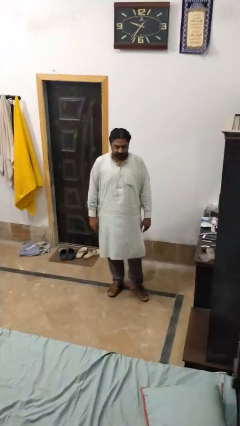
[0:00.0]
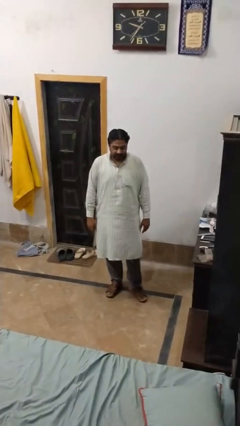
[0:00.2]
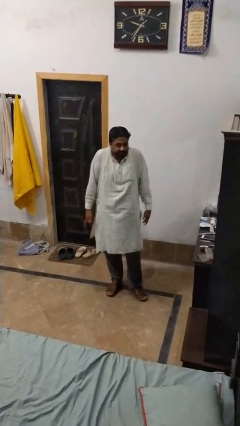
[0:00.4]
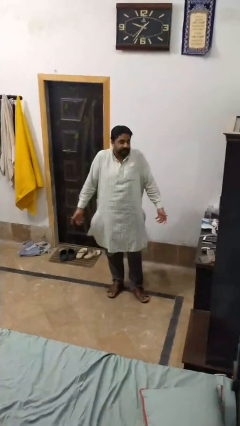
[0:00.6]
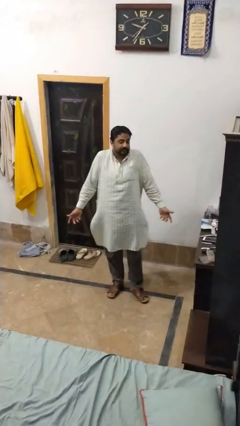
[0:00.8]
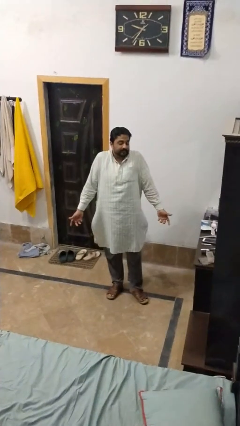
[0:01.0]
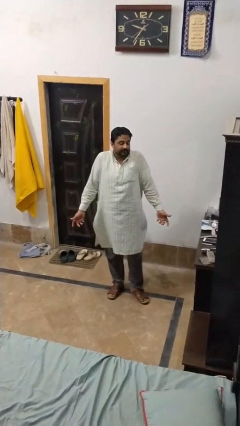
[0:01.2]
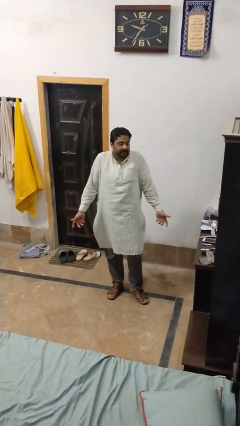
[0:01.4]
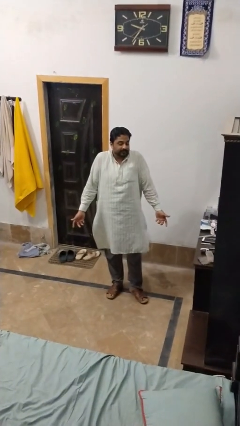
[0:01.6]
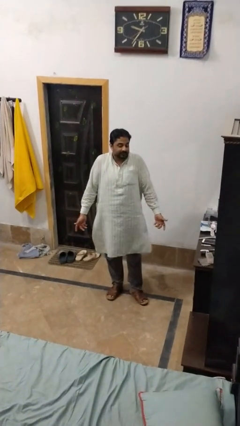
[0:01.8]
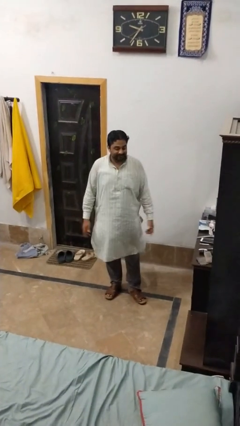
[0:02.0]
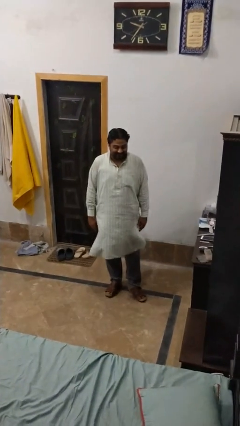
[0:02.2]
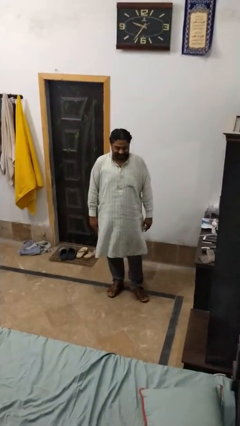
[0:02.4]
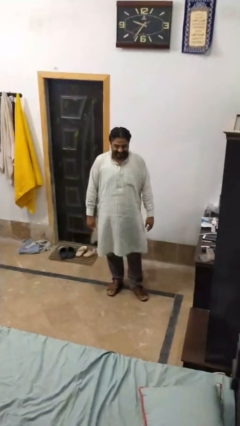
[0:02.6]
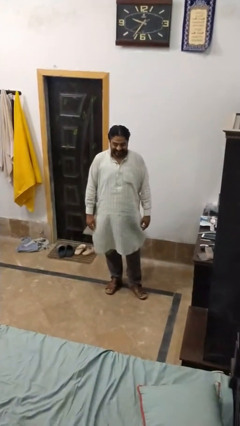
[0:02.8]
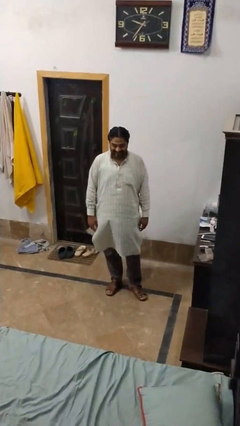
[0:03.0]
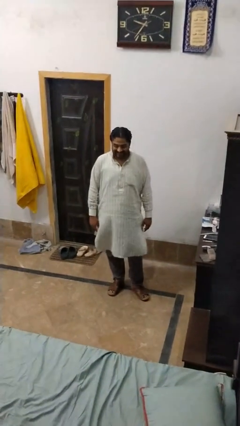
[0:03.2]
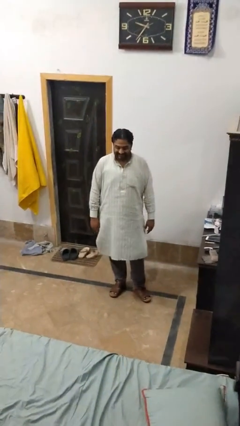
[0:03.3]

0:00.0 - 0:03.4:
person shrugs

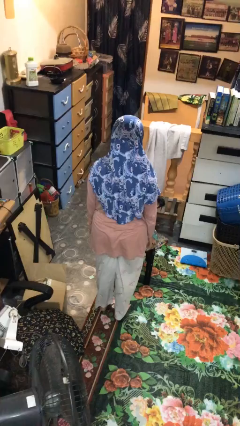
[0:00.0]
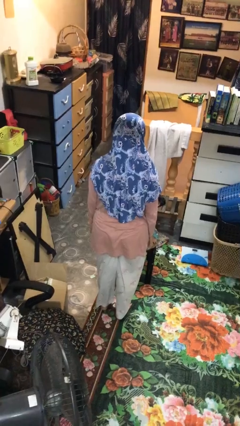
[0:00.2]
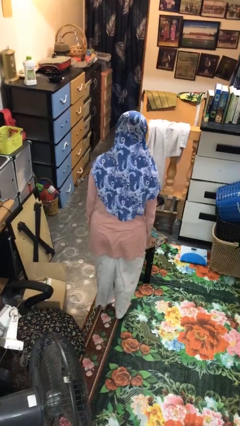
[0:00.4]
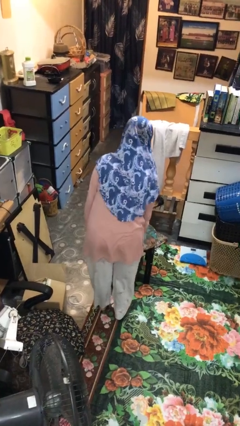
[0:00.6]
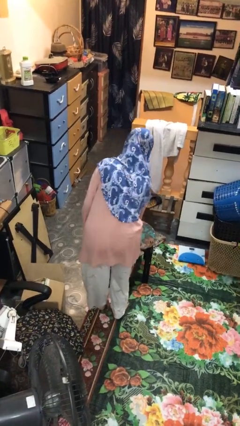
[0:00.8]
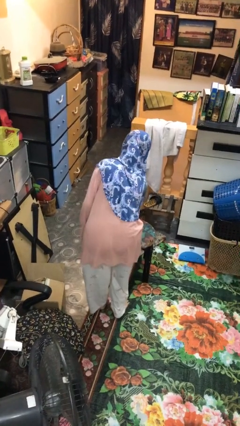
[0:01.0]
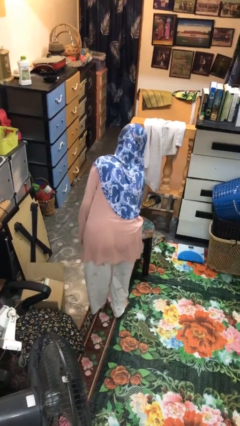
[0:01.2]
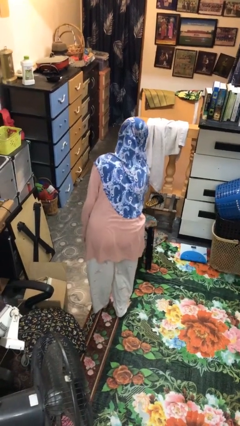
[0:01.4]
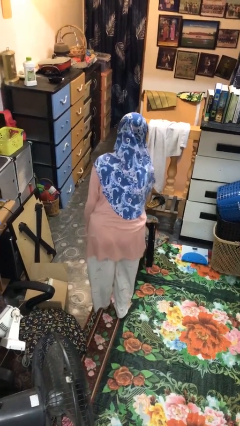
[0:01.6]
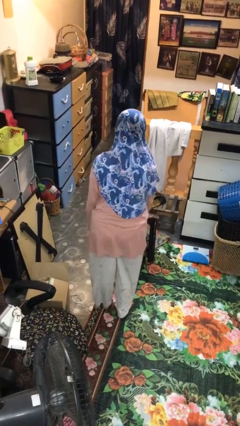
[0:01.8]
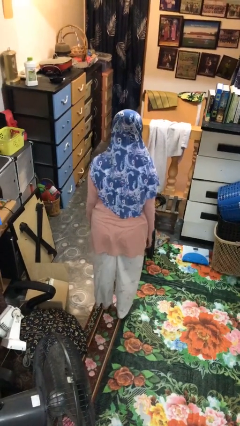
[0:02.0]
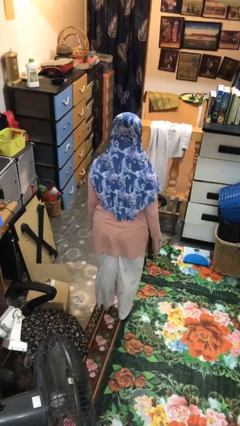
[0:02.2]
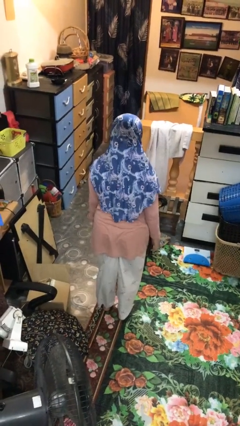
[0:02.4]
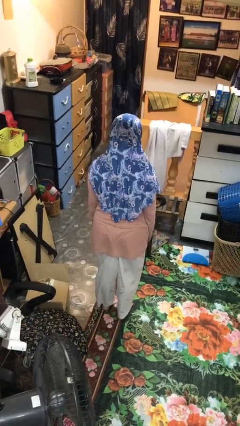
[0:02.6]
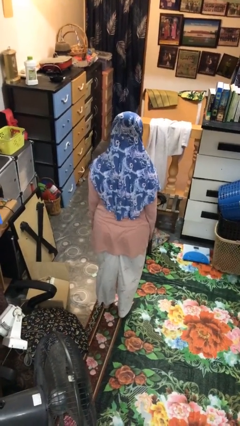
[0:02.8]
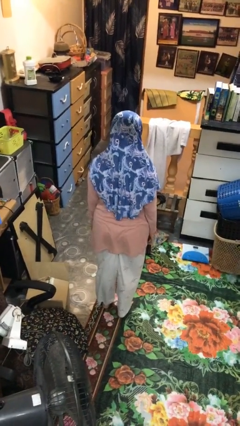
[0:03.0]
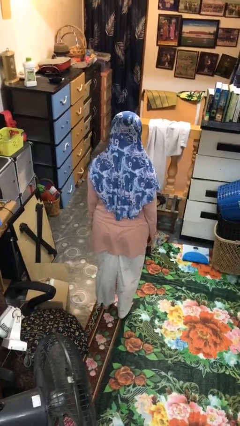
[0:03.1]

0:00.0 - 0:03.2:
person knocks over furniture

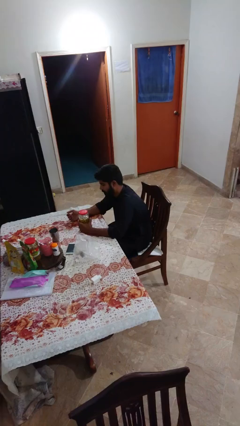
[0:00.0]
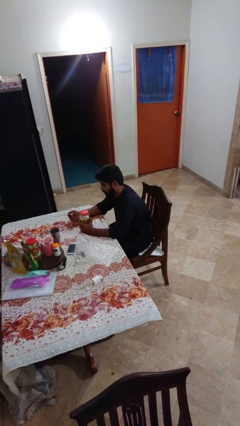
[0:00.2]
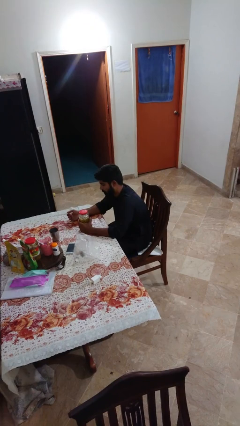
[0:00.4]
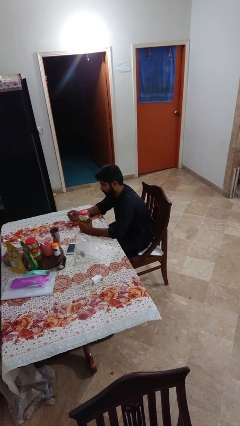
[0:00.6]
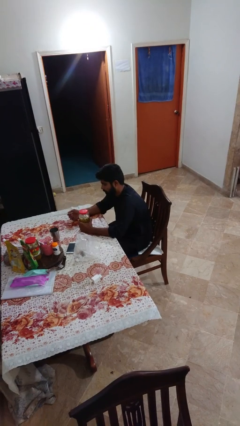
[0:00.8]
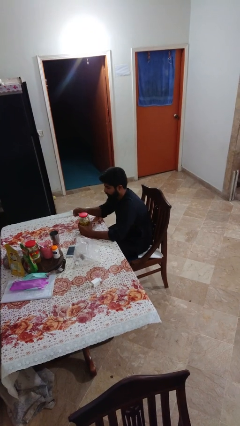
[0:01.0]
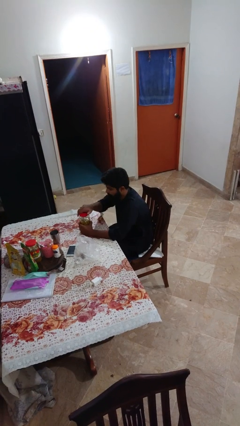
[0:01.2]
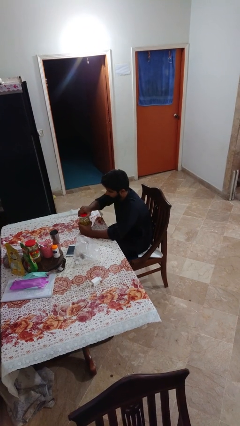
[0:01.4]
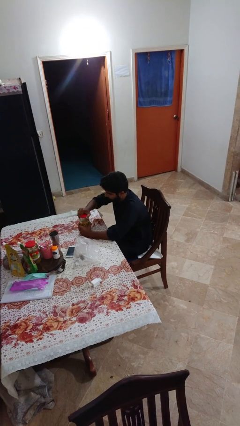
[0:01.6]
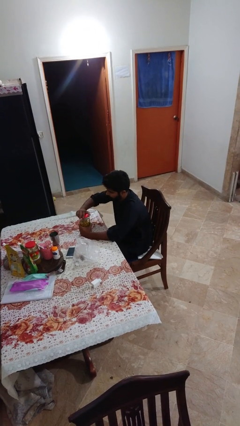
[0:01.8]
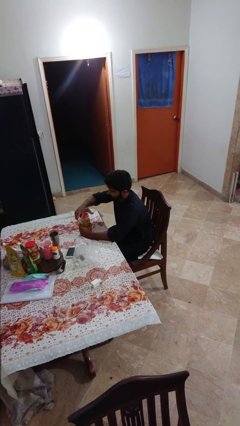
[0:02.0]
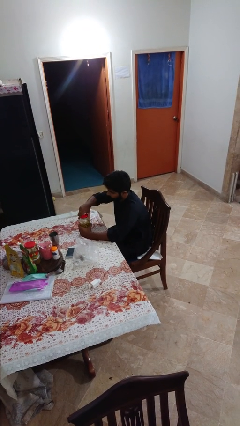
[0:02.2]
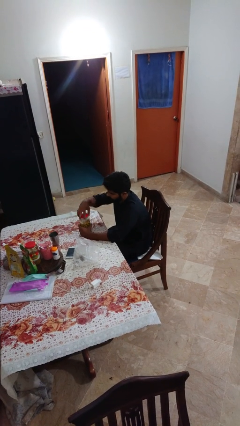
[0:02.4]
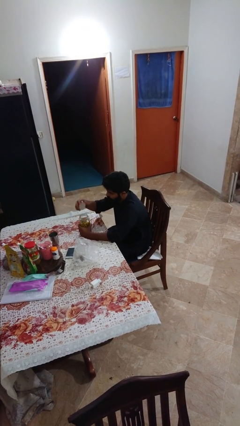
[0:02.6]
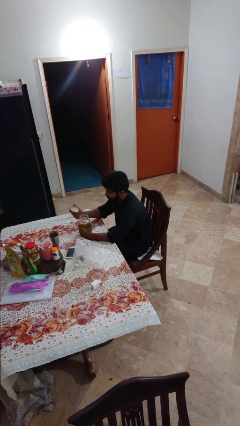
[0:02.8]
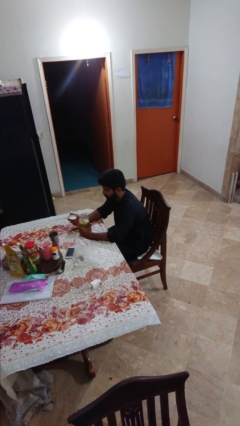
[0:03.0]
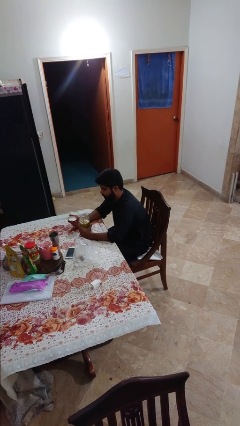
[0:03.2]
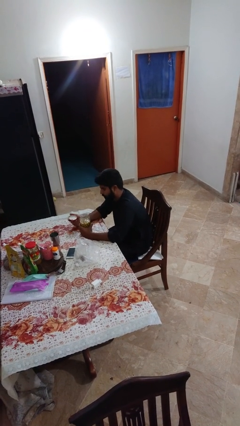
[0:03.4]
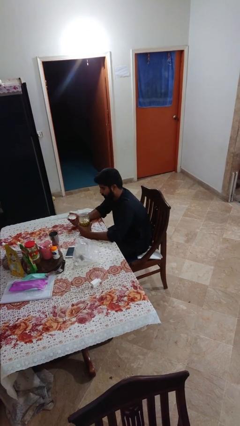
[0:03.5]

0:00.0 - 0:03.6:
person opens jar

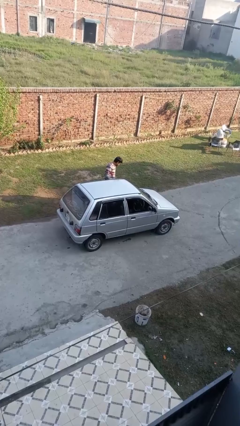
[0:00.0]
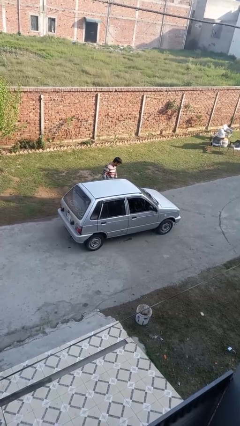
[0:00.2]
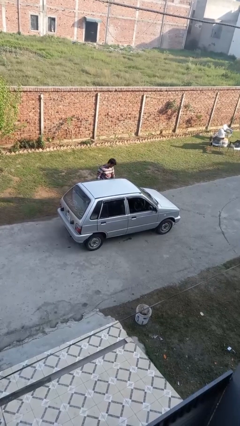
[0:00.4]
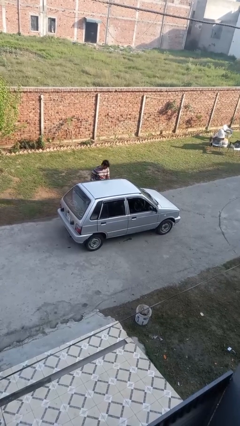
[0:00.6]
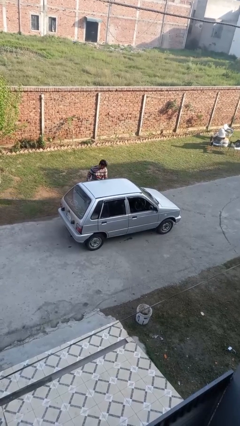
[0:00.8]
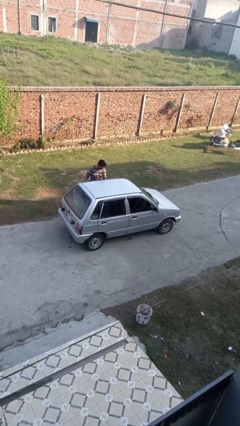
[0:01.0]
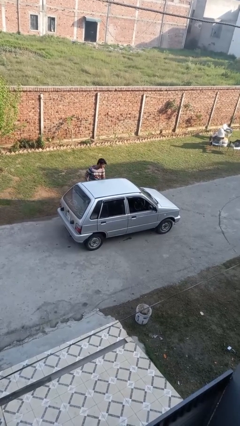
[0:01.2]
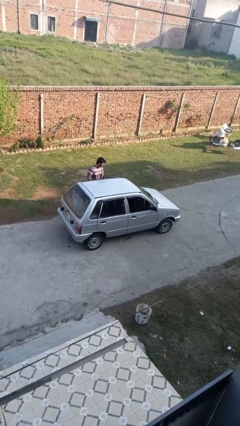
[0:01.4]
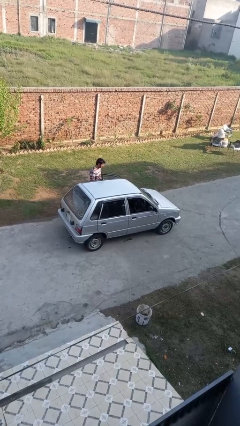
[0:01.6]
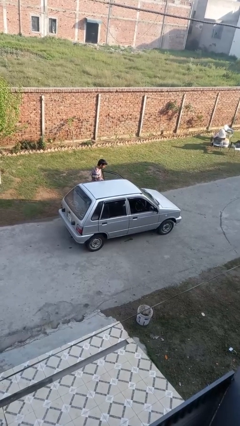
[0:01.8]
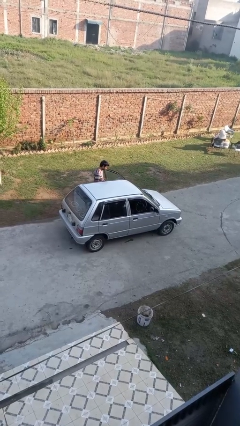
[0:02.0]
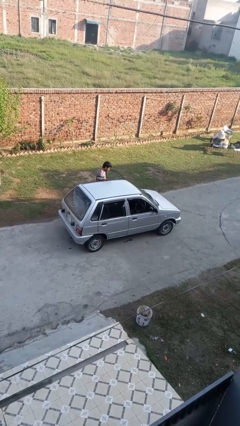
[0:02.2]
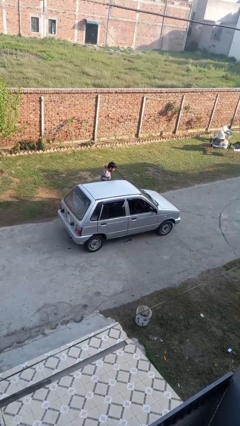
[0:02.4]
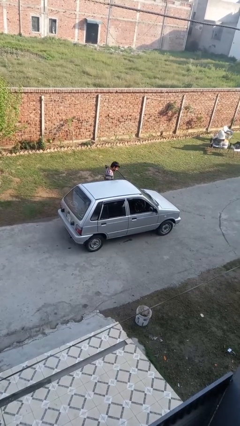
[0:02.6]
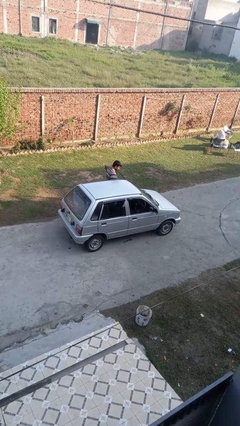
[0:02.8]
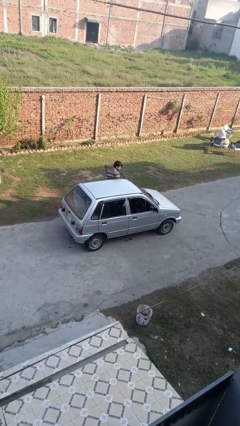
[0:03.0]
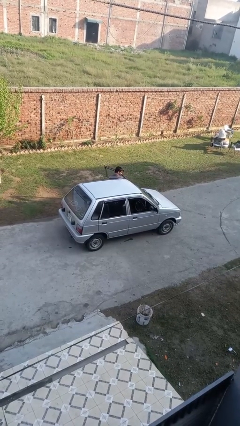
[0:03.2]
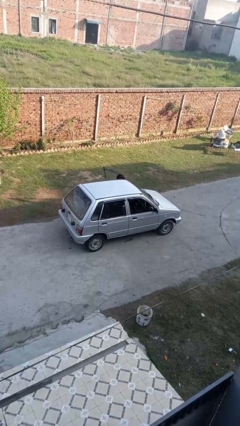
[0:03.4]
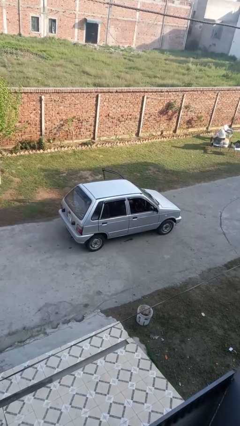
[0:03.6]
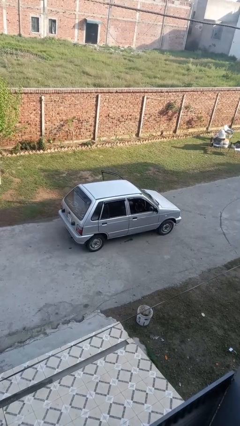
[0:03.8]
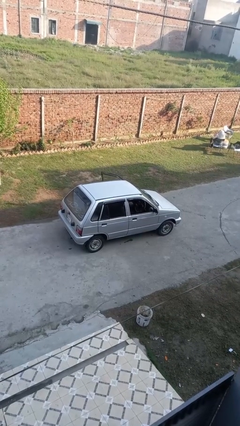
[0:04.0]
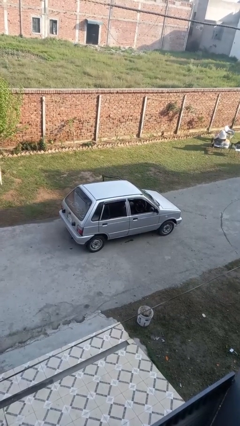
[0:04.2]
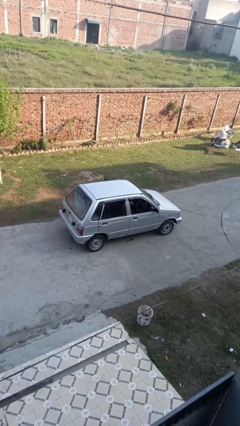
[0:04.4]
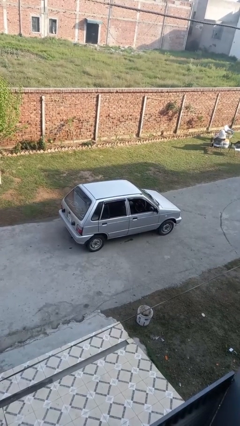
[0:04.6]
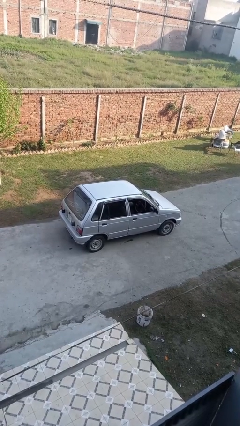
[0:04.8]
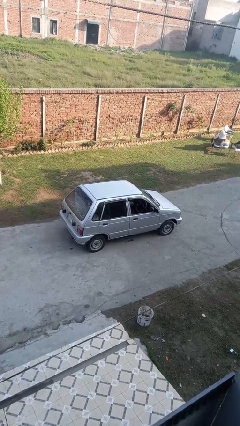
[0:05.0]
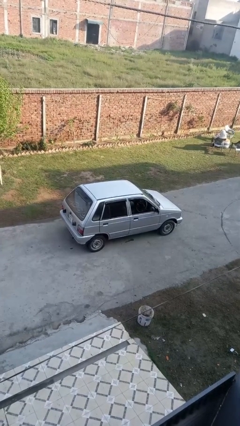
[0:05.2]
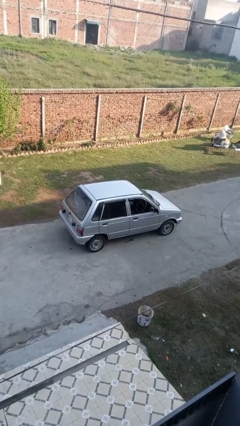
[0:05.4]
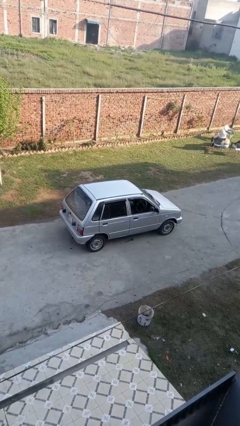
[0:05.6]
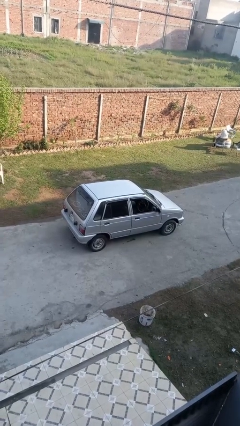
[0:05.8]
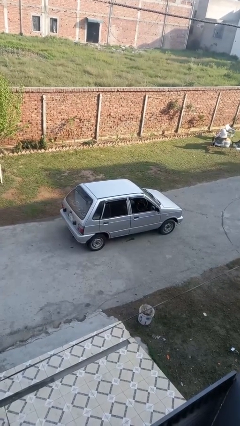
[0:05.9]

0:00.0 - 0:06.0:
car picks up person

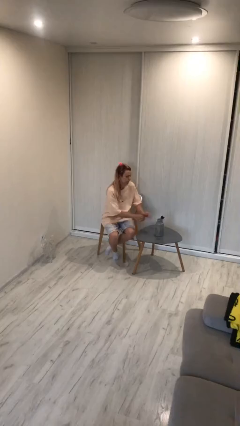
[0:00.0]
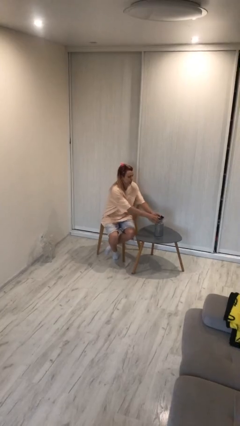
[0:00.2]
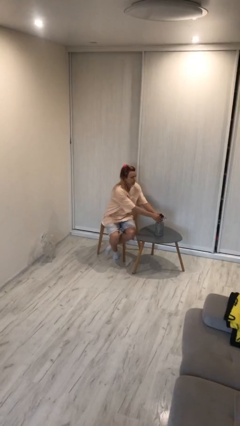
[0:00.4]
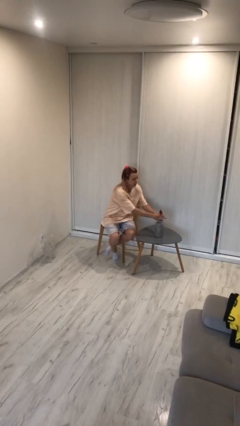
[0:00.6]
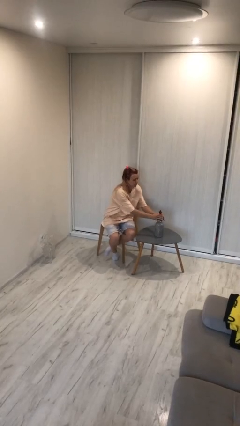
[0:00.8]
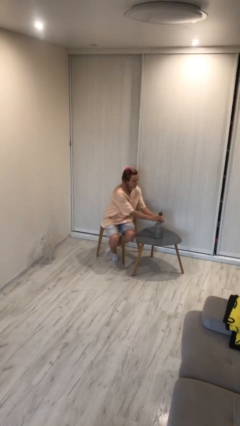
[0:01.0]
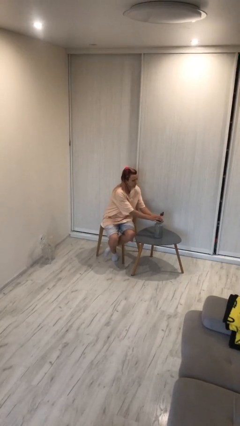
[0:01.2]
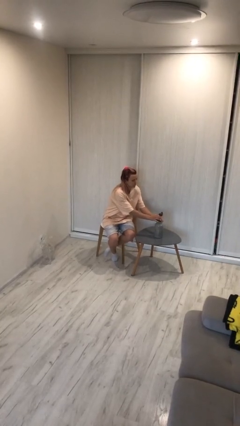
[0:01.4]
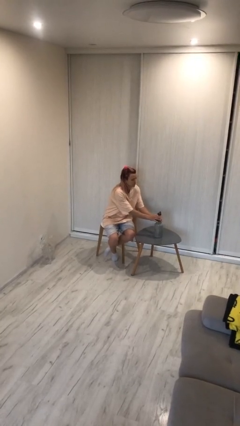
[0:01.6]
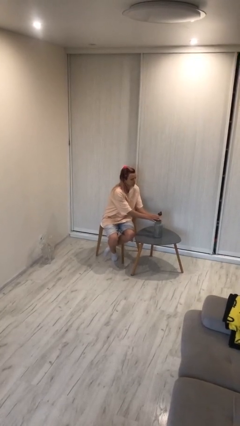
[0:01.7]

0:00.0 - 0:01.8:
person arranges flowers in vase
